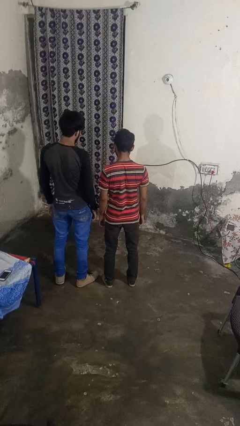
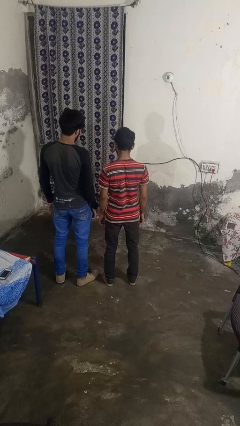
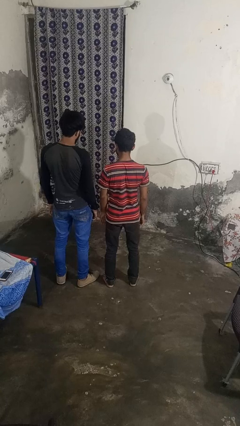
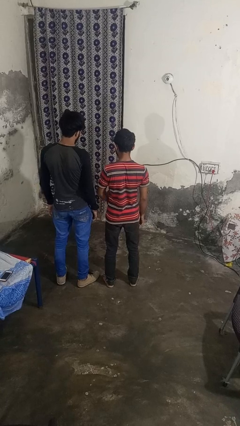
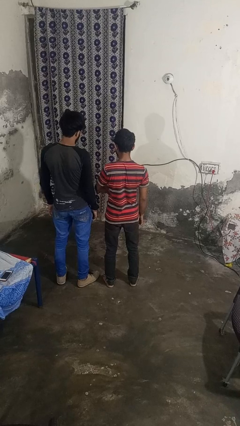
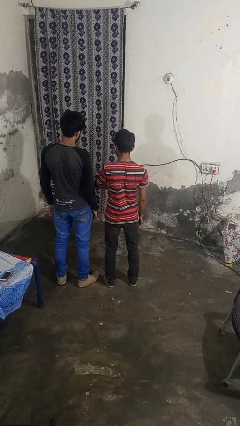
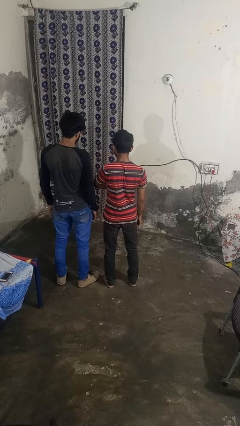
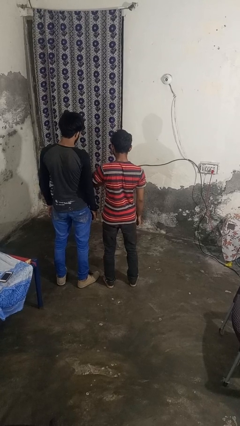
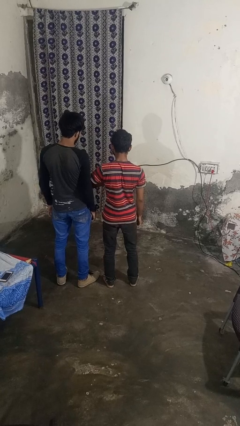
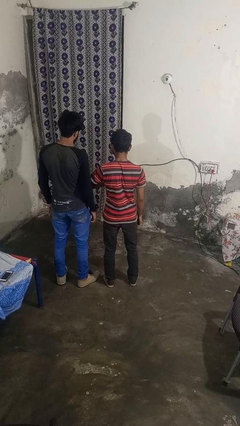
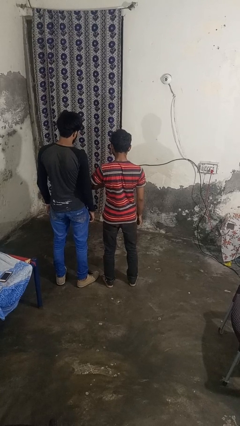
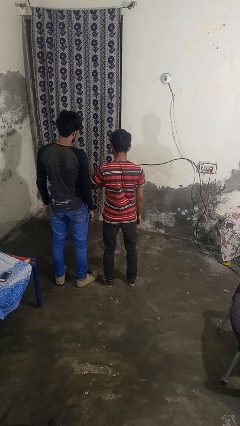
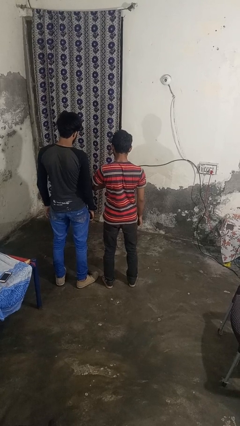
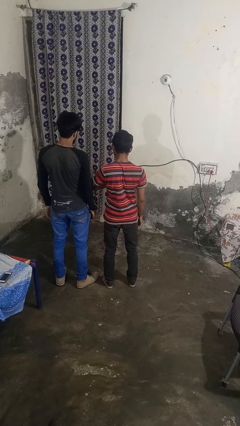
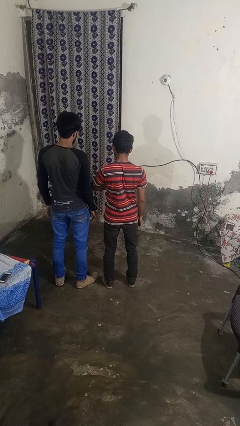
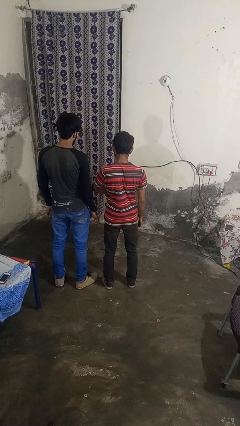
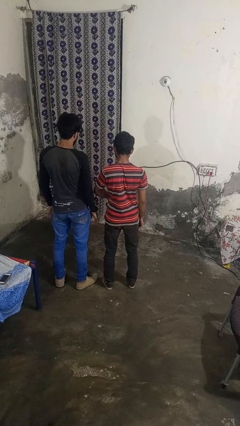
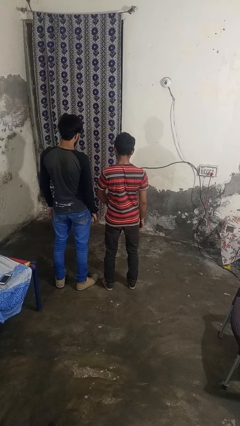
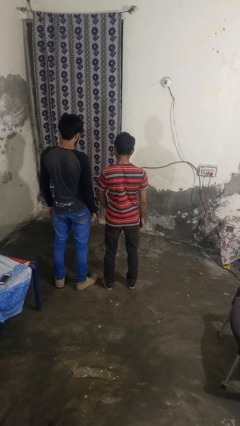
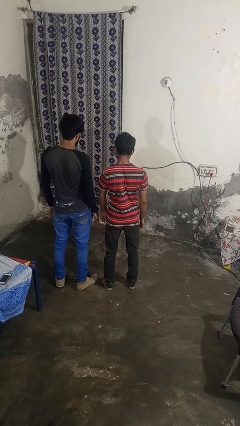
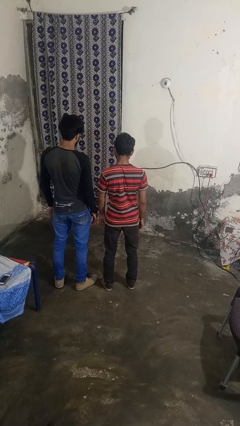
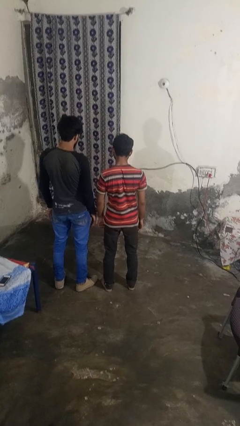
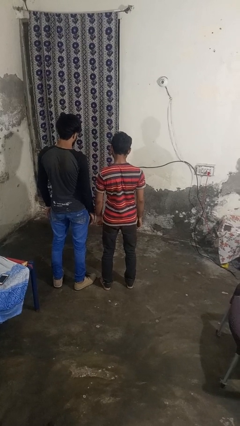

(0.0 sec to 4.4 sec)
person nudges person with elbow

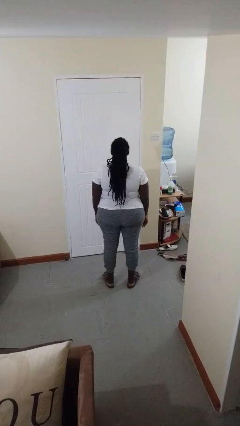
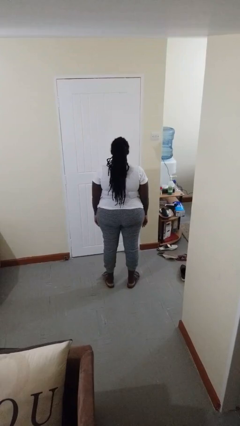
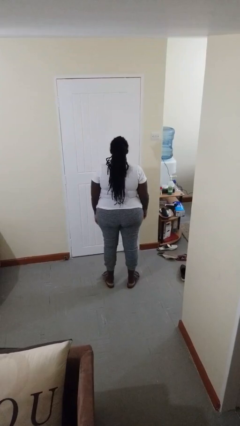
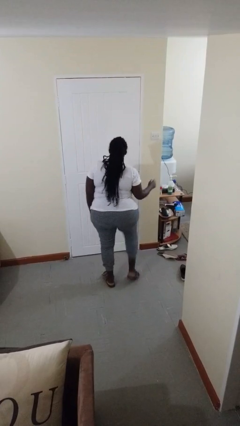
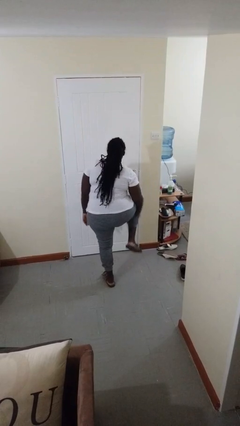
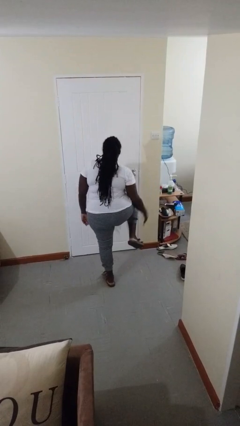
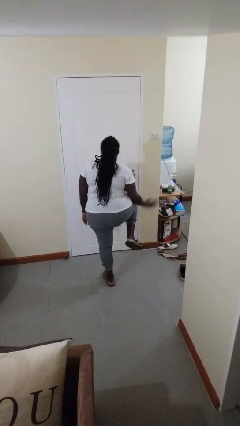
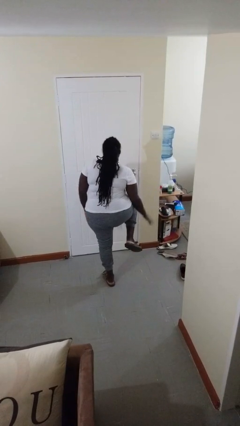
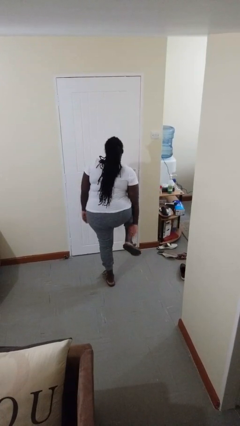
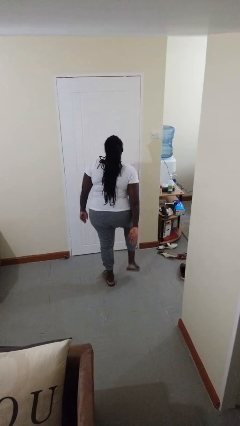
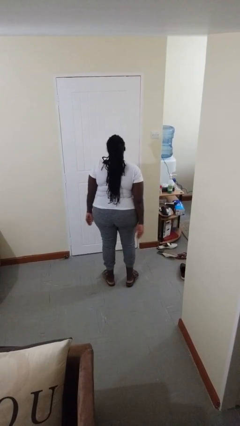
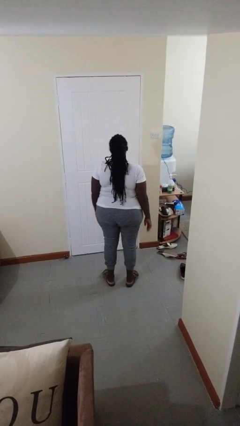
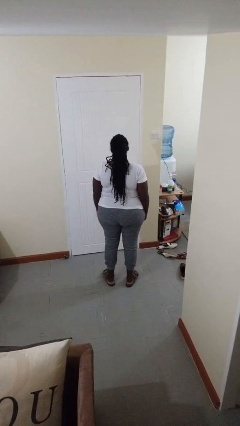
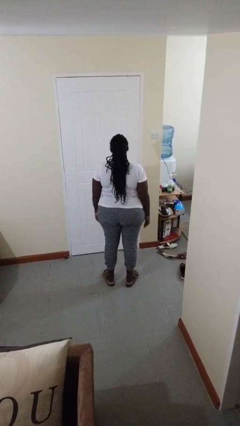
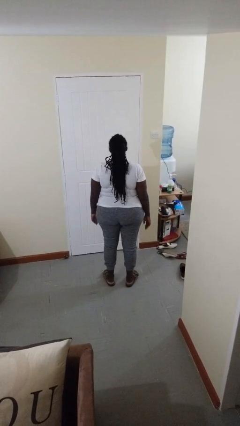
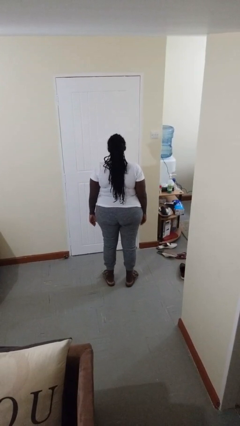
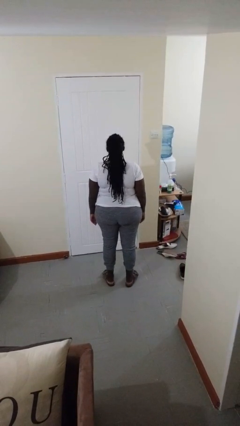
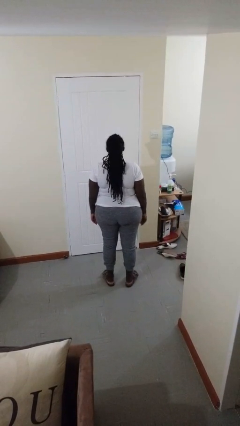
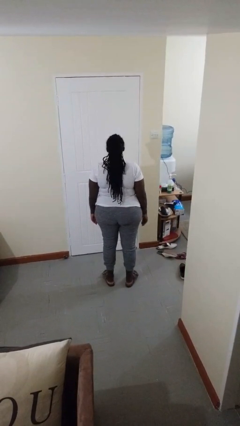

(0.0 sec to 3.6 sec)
person swats bug

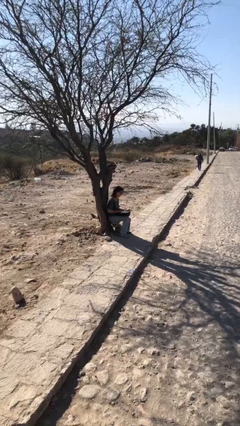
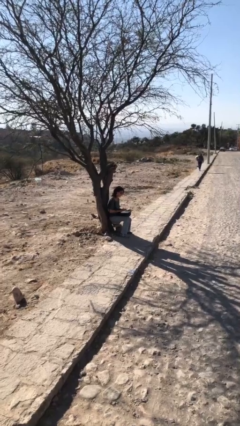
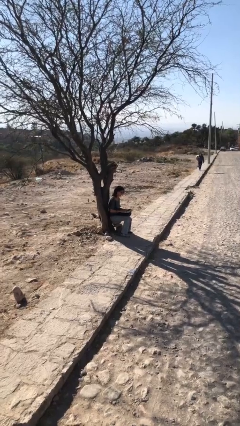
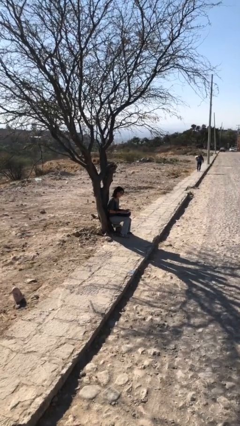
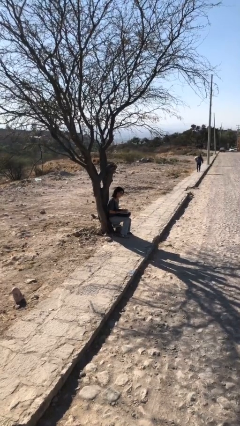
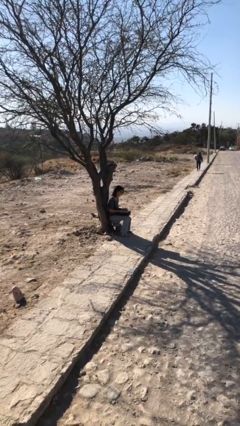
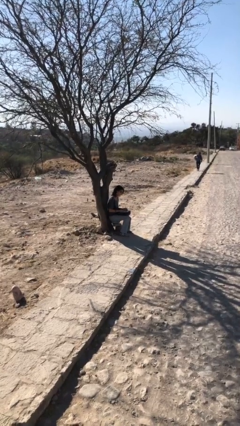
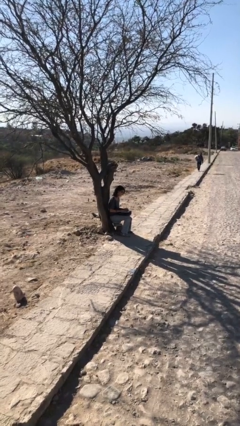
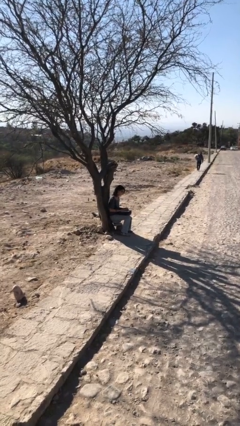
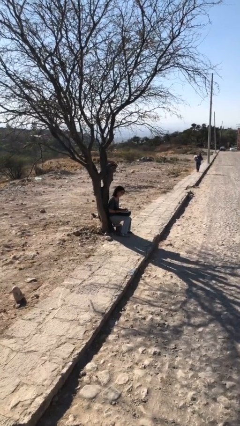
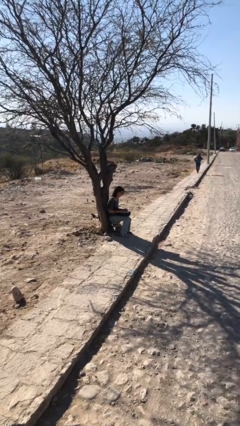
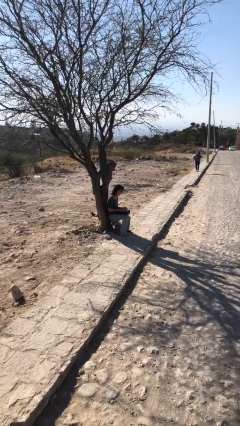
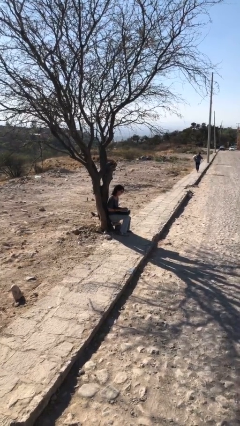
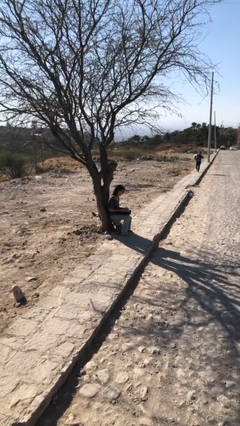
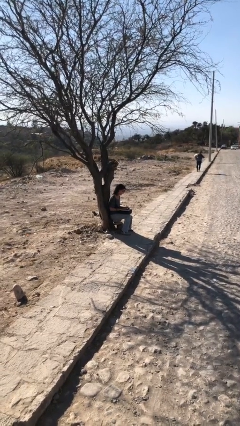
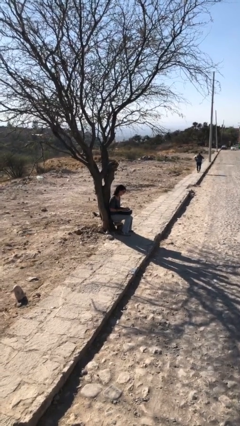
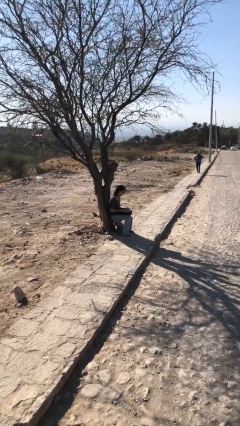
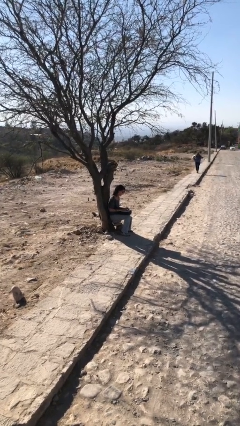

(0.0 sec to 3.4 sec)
person interacts with laptop

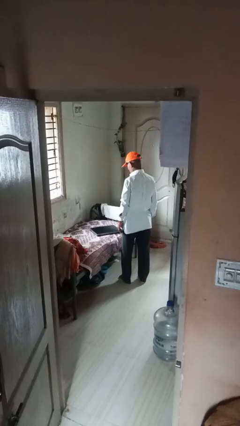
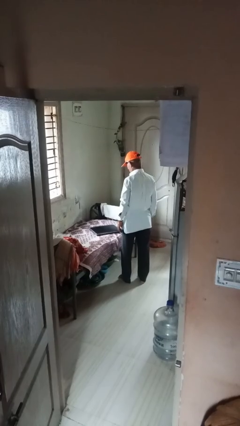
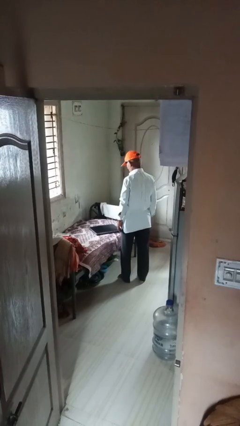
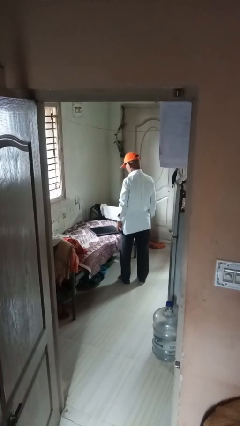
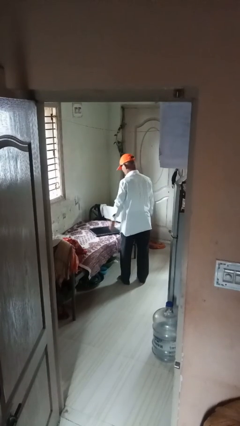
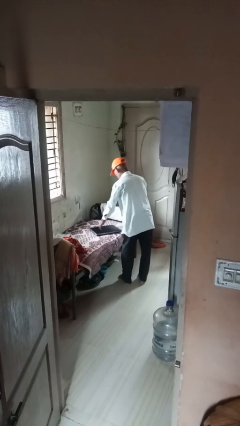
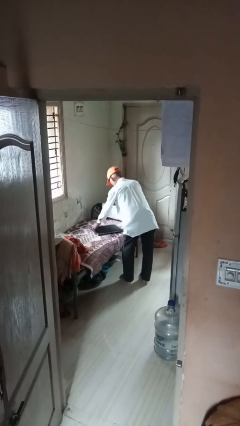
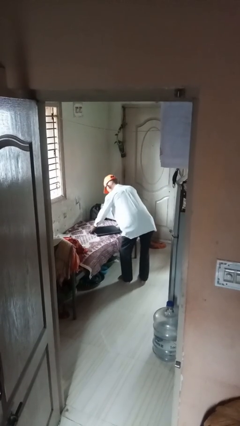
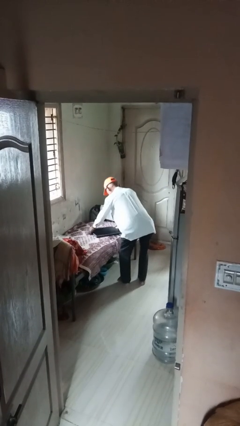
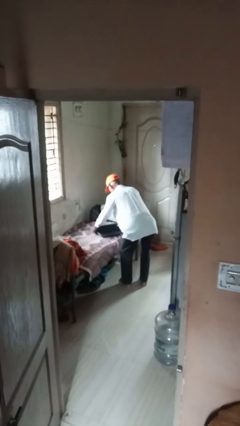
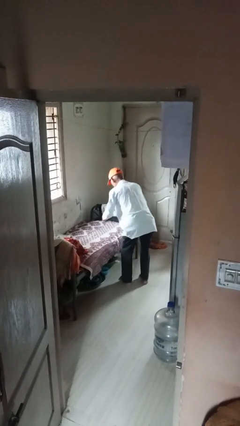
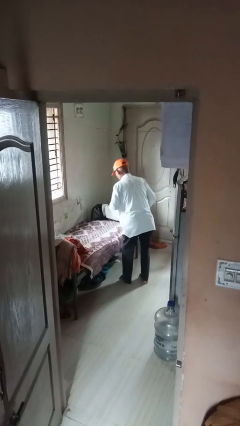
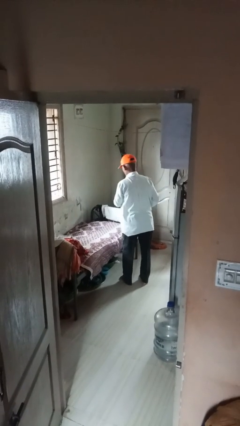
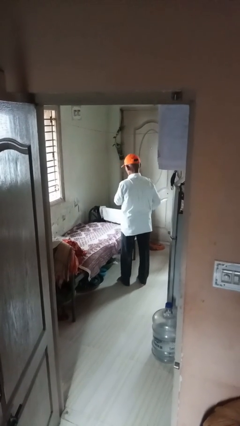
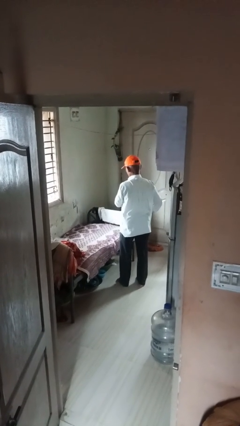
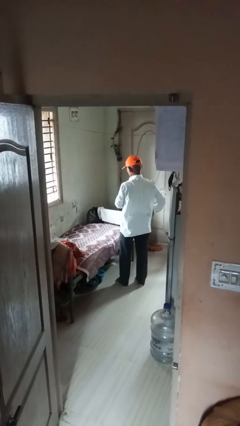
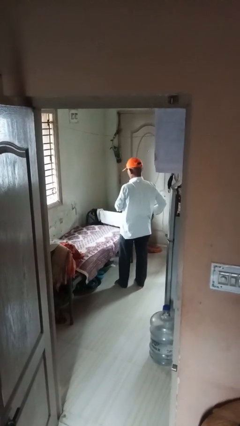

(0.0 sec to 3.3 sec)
person picks up object from bed

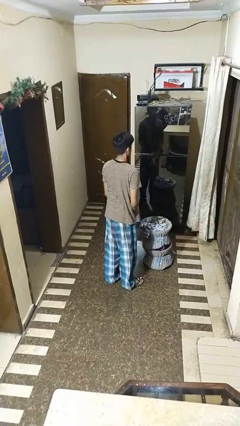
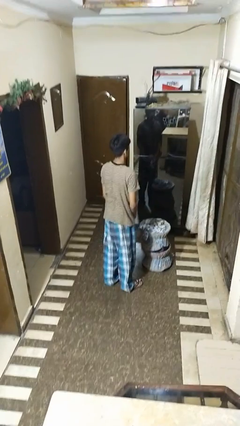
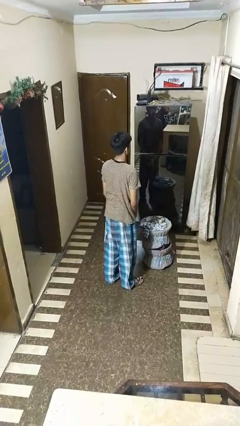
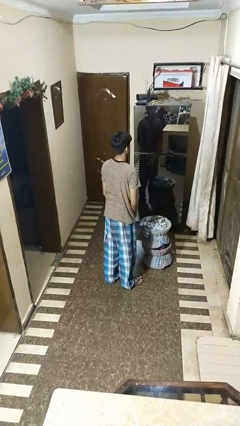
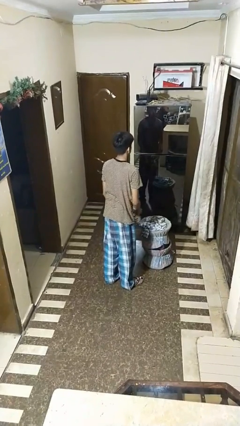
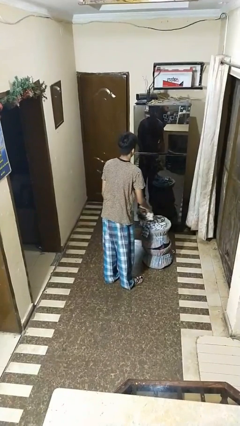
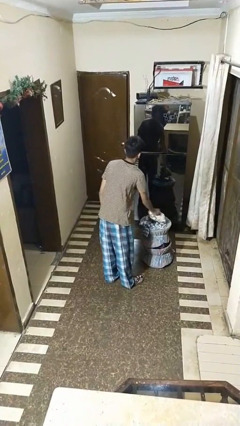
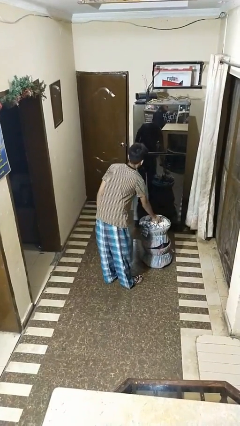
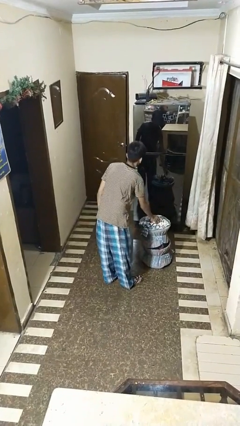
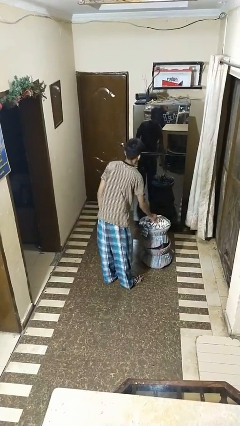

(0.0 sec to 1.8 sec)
person puts object into basket

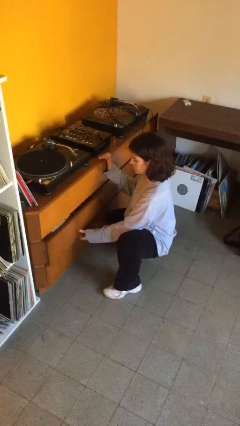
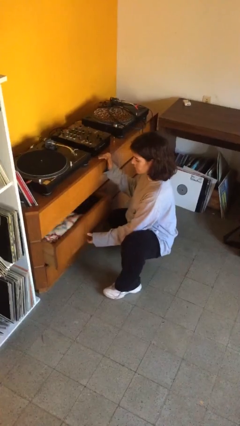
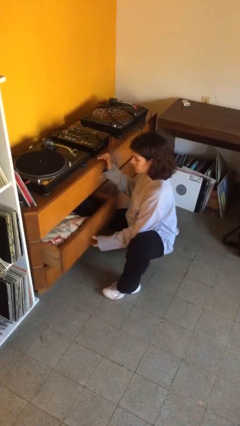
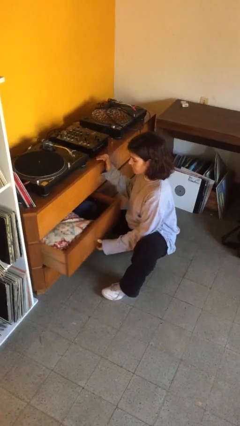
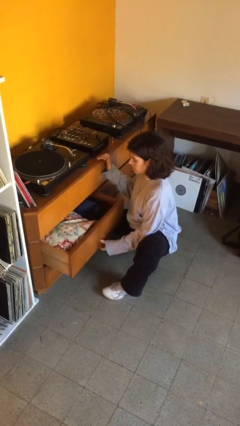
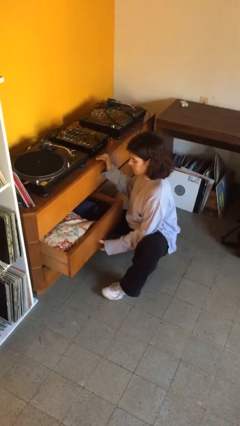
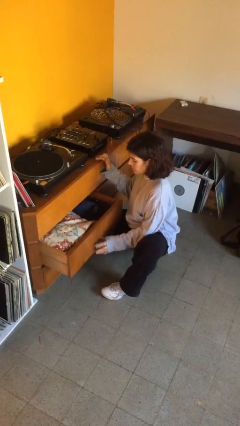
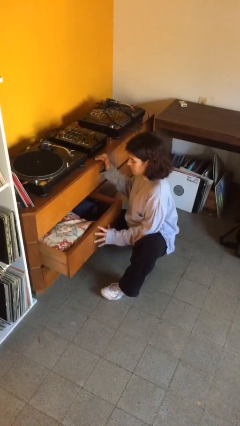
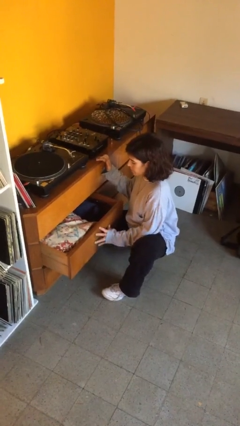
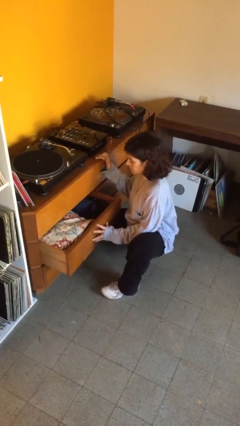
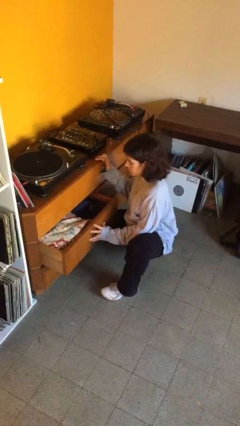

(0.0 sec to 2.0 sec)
person opens dresser drawer
